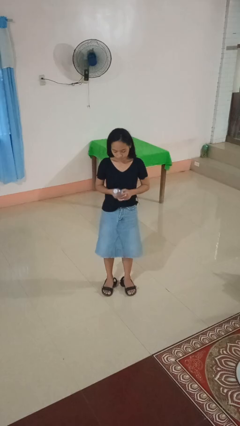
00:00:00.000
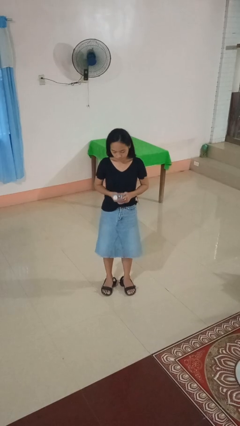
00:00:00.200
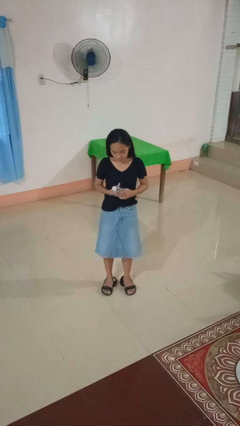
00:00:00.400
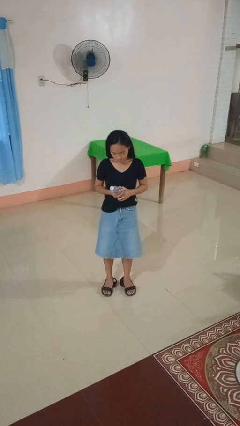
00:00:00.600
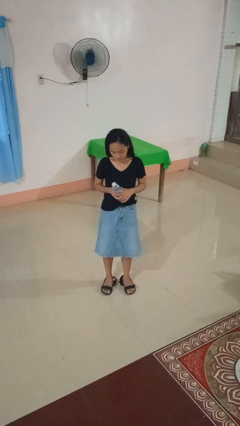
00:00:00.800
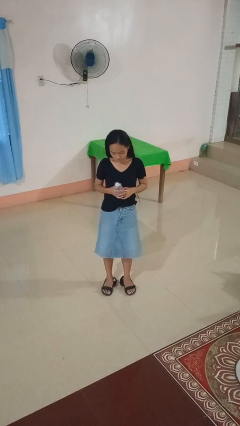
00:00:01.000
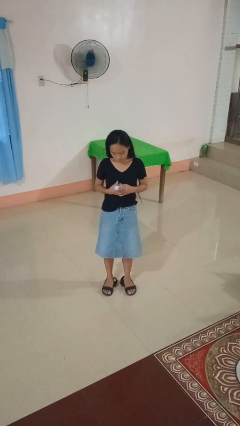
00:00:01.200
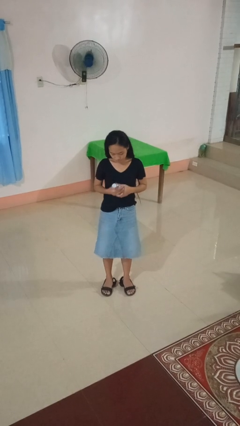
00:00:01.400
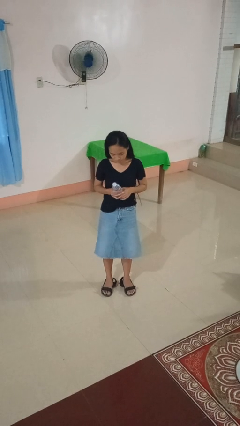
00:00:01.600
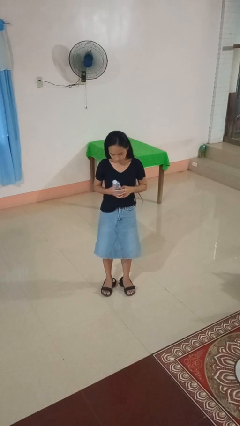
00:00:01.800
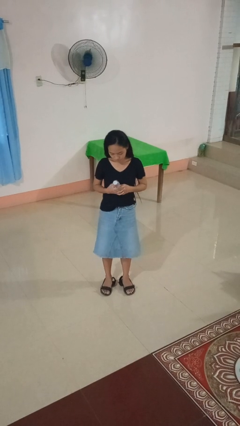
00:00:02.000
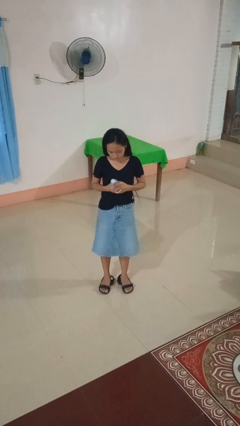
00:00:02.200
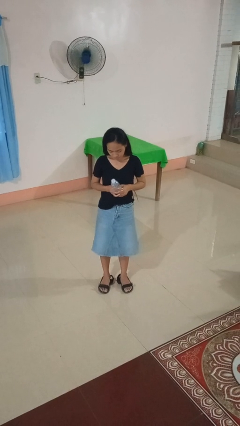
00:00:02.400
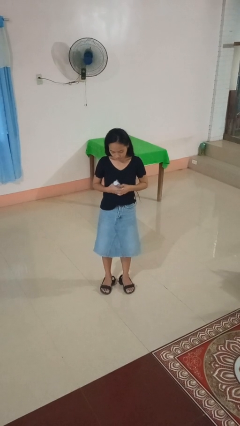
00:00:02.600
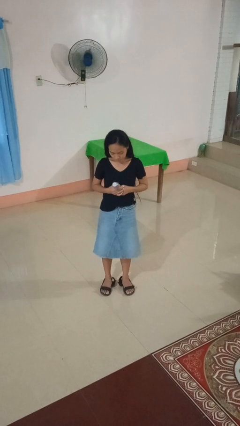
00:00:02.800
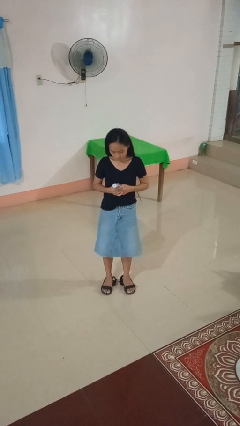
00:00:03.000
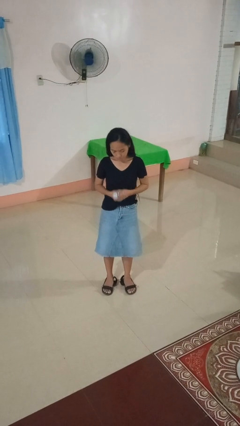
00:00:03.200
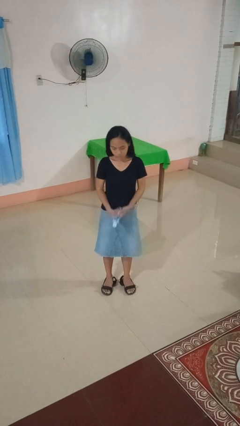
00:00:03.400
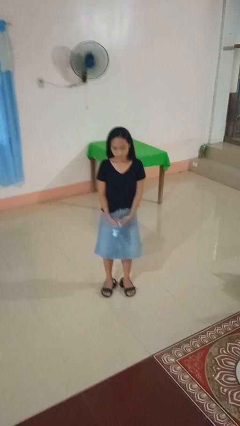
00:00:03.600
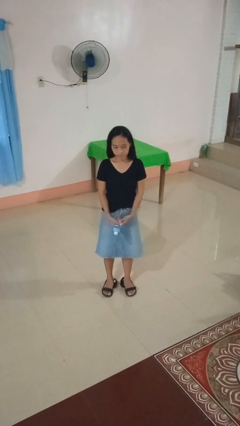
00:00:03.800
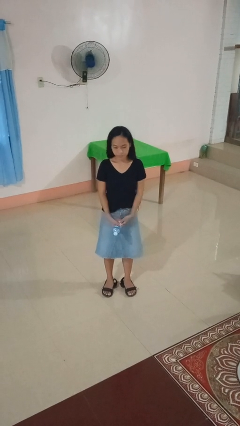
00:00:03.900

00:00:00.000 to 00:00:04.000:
person squeezes object

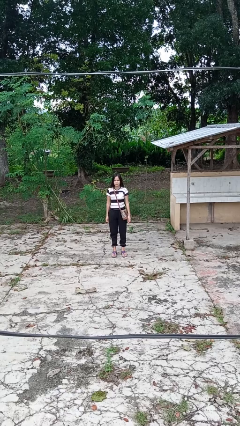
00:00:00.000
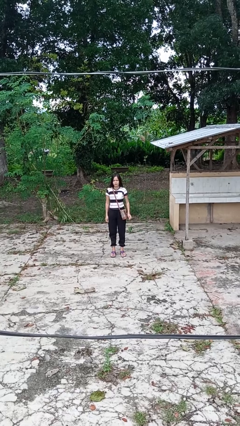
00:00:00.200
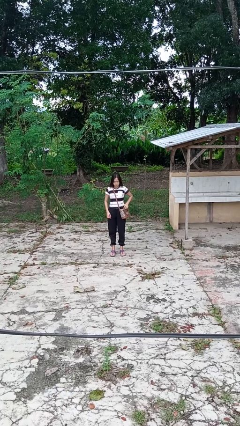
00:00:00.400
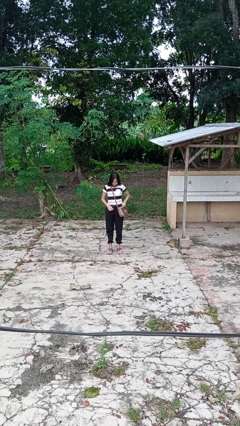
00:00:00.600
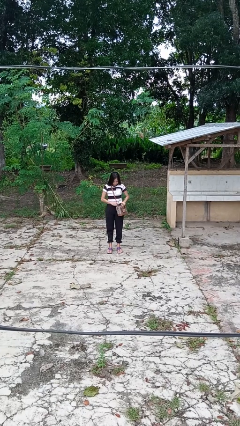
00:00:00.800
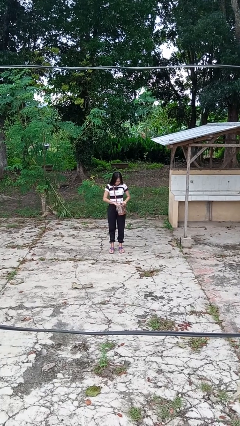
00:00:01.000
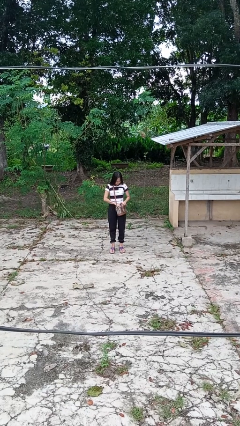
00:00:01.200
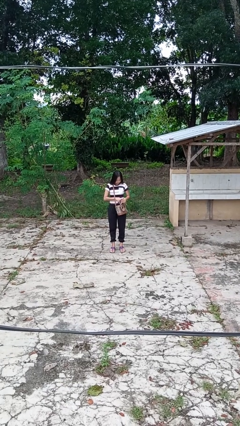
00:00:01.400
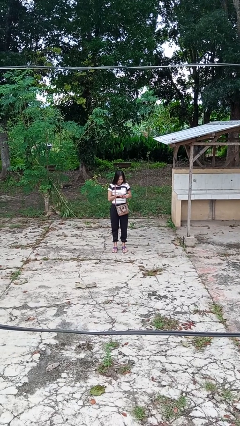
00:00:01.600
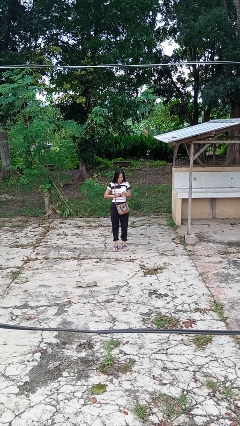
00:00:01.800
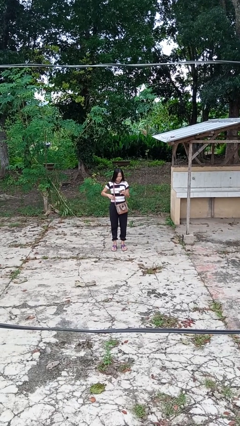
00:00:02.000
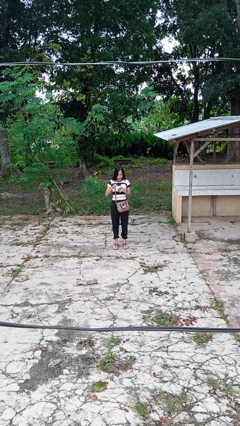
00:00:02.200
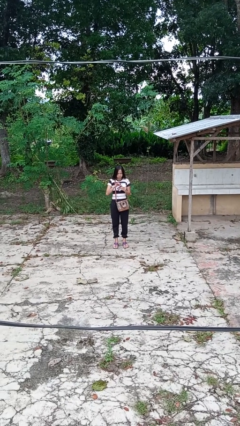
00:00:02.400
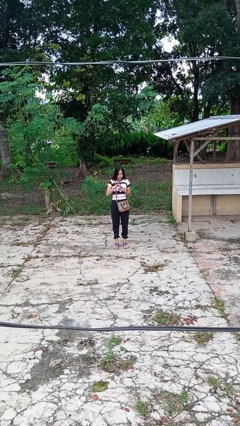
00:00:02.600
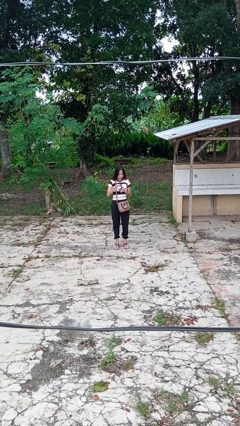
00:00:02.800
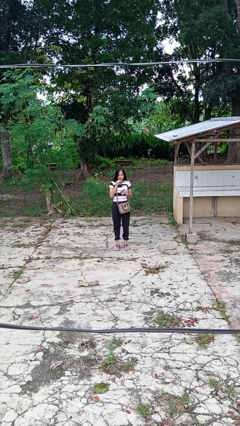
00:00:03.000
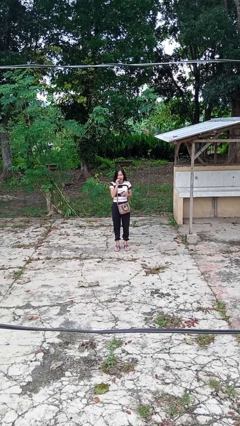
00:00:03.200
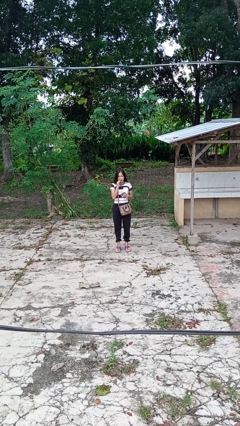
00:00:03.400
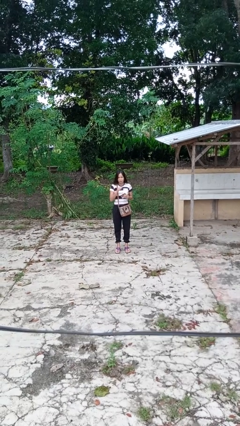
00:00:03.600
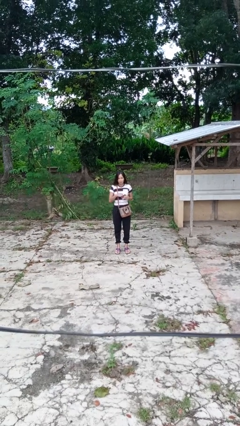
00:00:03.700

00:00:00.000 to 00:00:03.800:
person eats snack from bag

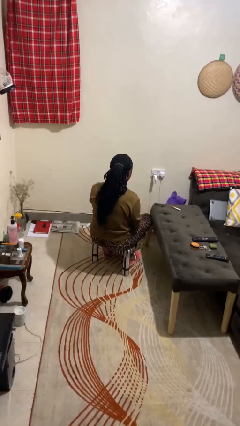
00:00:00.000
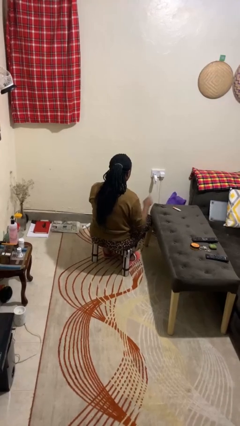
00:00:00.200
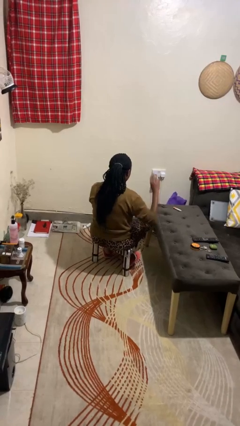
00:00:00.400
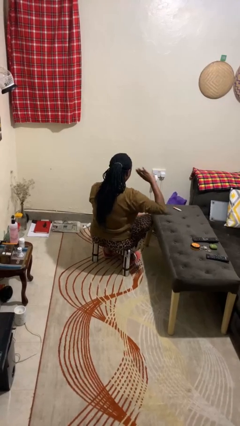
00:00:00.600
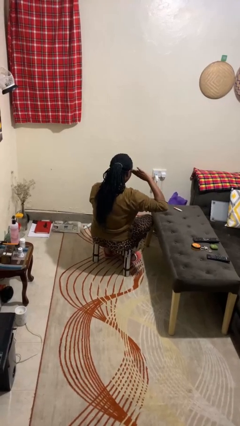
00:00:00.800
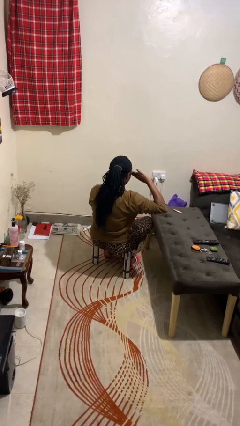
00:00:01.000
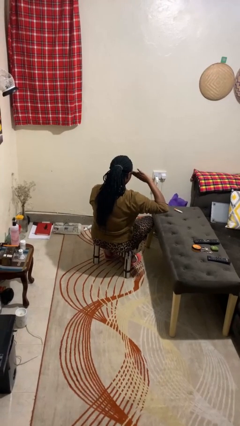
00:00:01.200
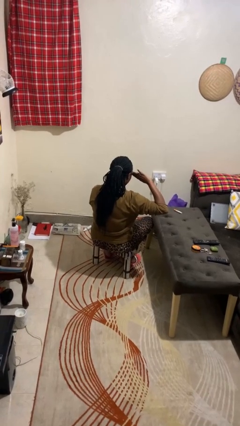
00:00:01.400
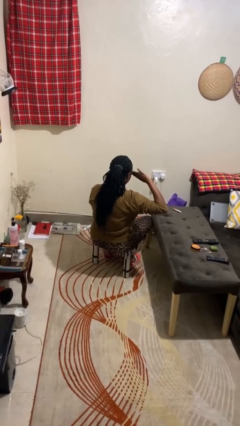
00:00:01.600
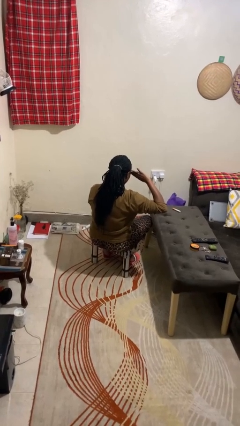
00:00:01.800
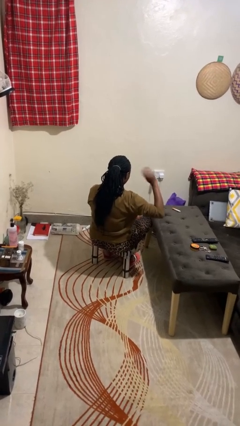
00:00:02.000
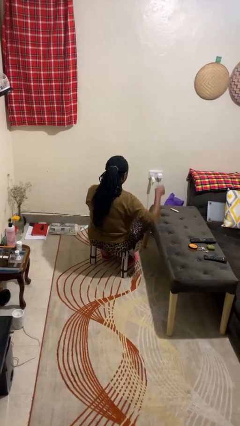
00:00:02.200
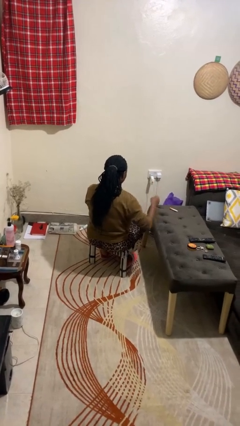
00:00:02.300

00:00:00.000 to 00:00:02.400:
person salutes

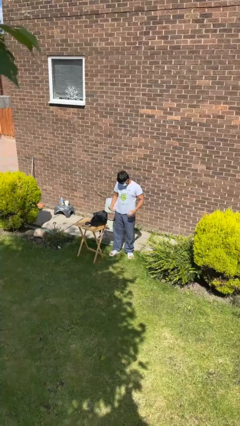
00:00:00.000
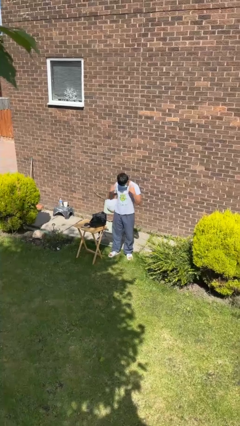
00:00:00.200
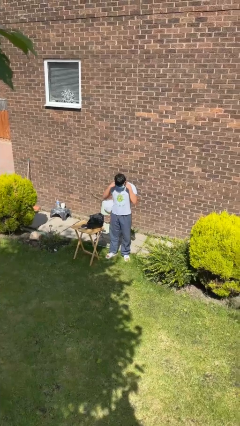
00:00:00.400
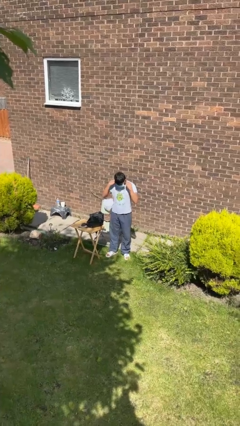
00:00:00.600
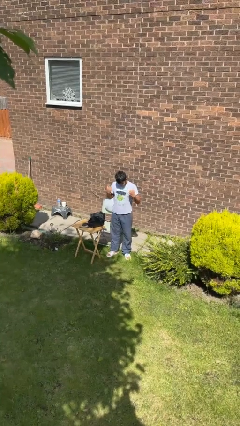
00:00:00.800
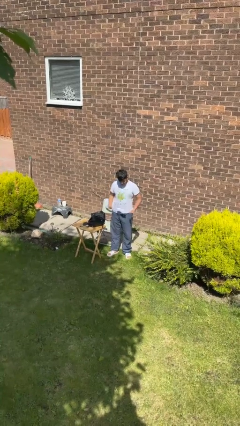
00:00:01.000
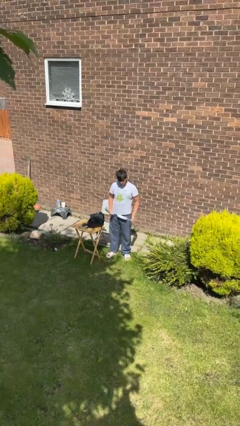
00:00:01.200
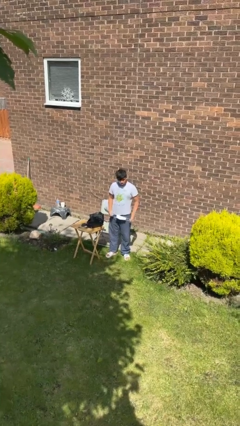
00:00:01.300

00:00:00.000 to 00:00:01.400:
person takes off facemask

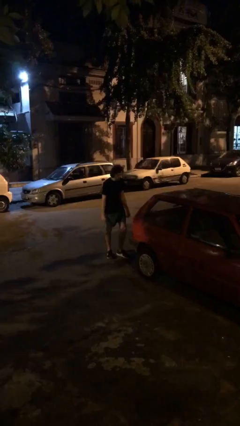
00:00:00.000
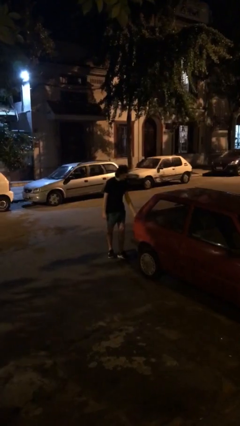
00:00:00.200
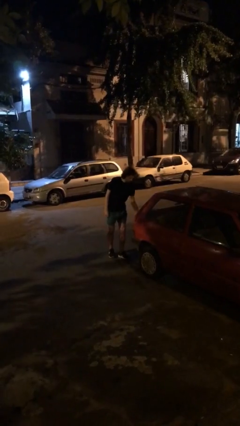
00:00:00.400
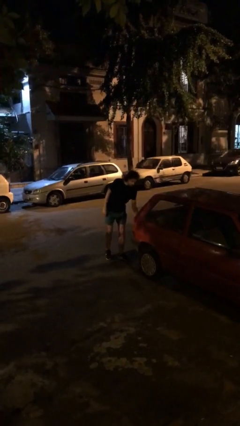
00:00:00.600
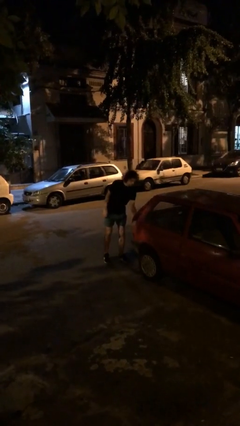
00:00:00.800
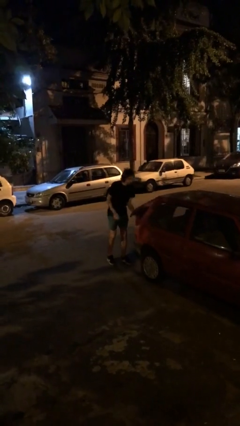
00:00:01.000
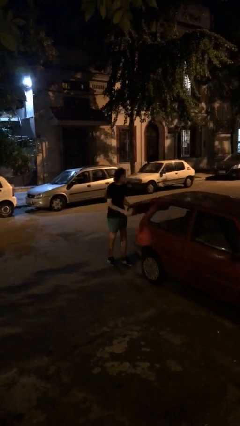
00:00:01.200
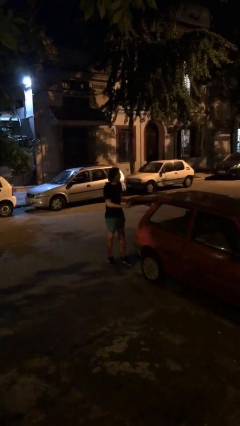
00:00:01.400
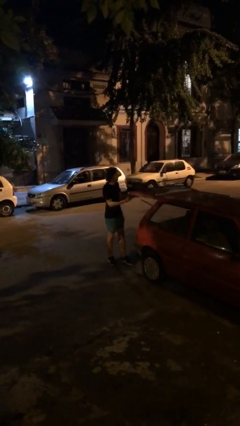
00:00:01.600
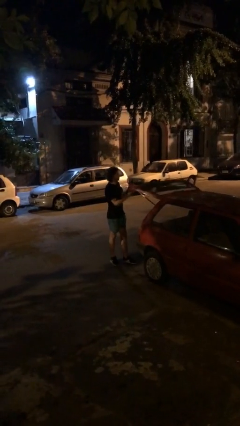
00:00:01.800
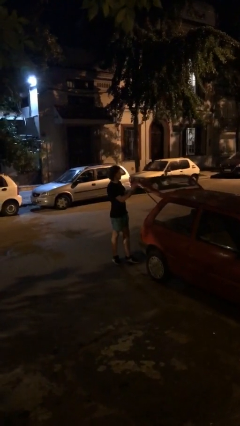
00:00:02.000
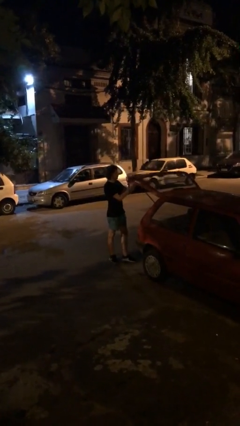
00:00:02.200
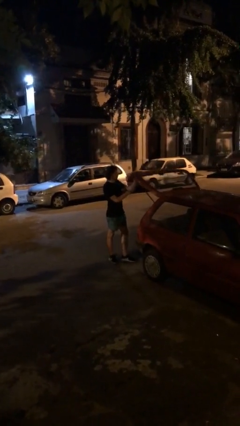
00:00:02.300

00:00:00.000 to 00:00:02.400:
person opens car trunk

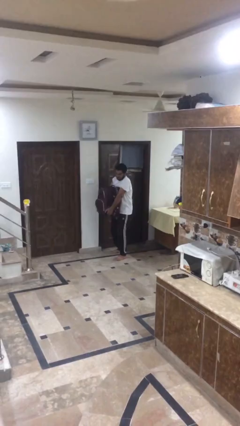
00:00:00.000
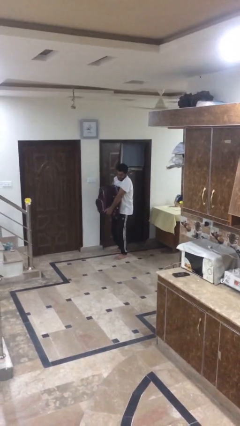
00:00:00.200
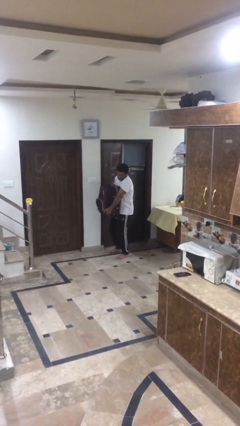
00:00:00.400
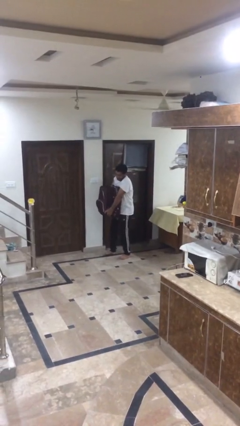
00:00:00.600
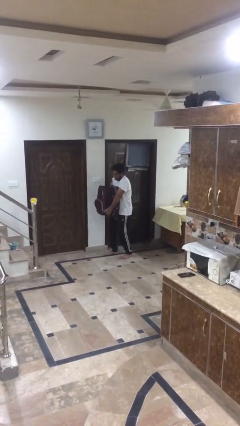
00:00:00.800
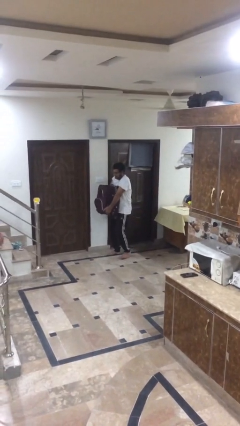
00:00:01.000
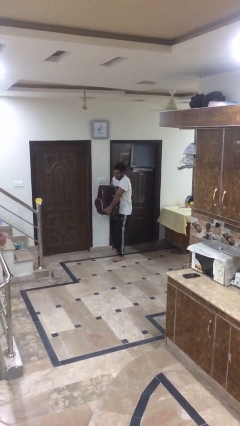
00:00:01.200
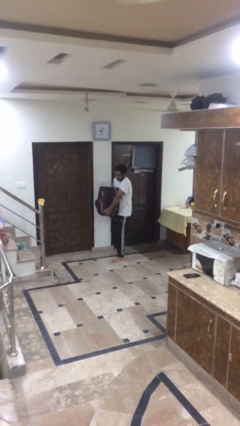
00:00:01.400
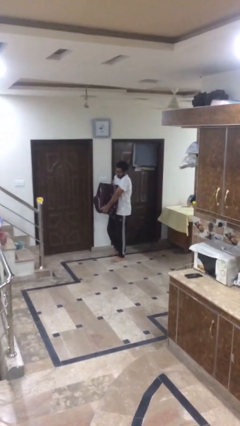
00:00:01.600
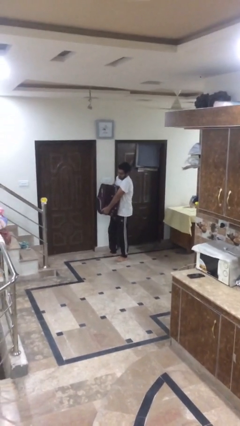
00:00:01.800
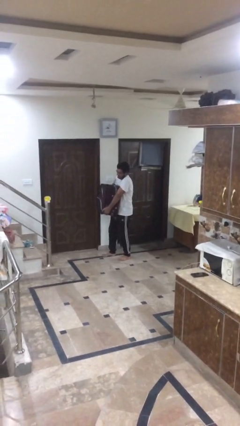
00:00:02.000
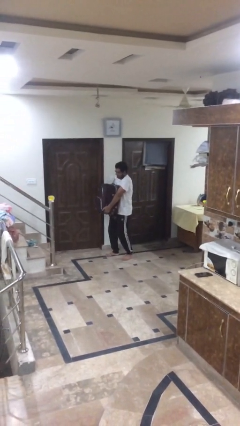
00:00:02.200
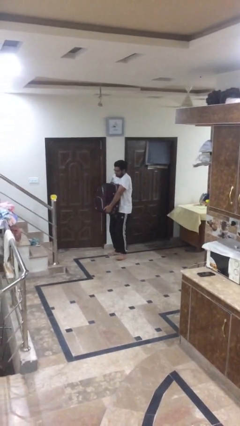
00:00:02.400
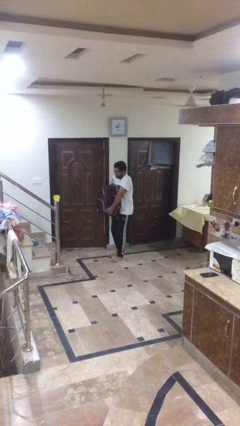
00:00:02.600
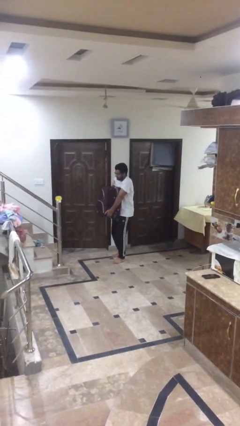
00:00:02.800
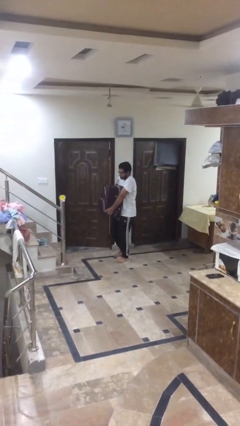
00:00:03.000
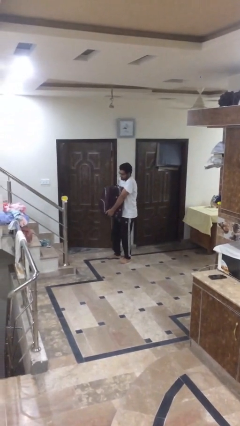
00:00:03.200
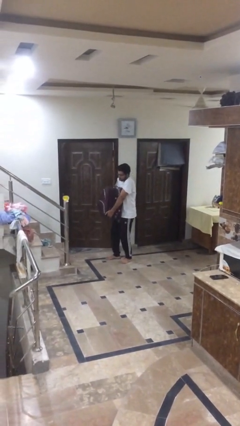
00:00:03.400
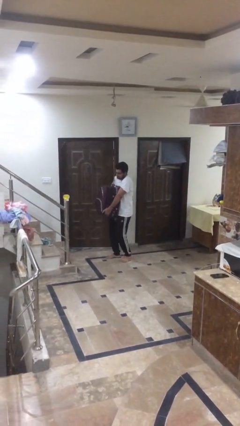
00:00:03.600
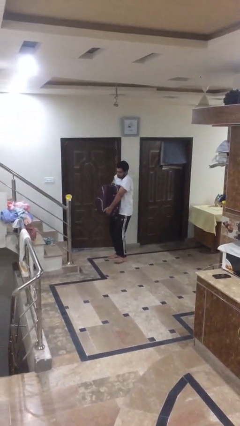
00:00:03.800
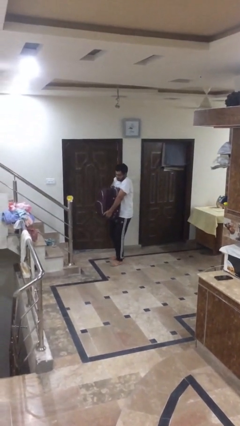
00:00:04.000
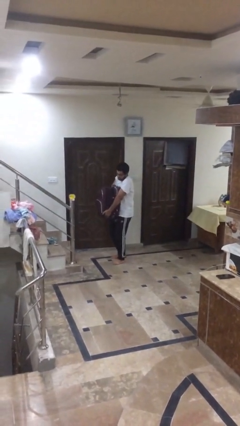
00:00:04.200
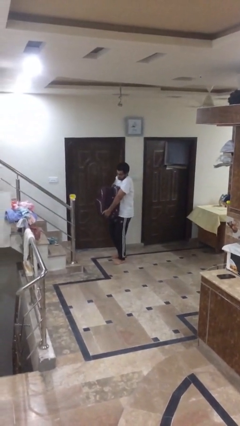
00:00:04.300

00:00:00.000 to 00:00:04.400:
person carries heavy object
